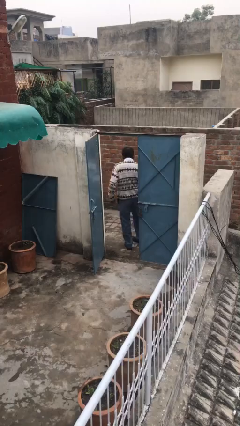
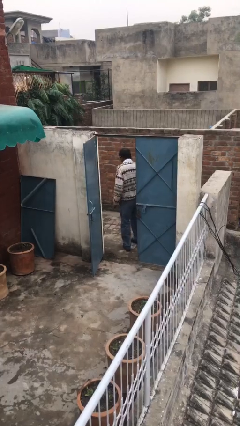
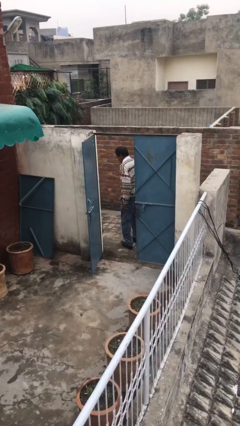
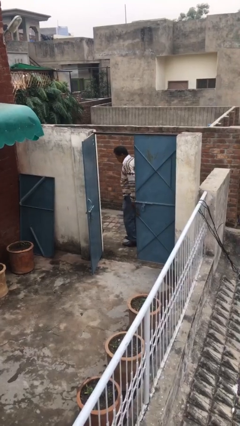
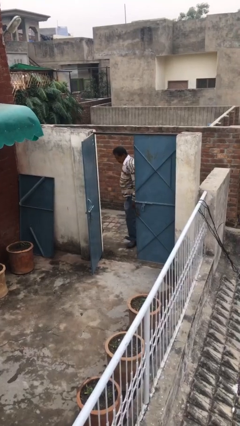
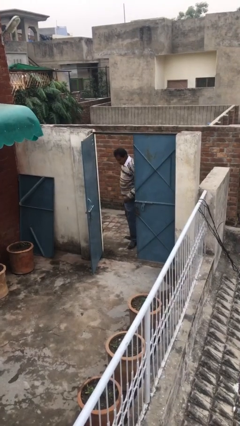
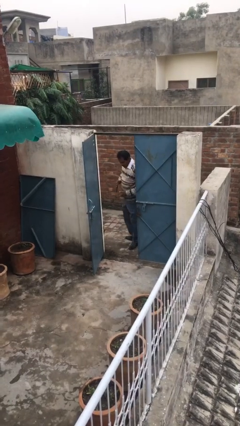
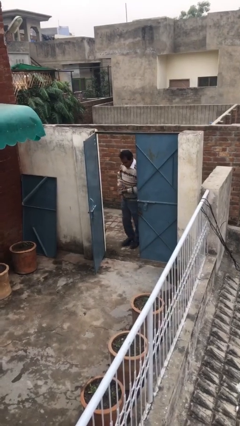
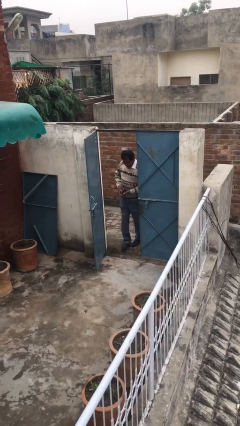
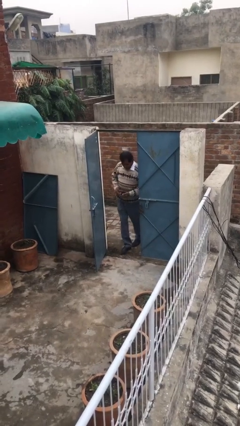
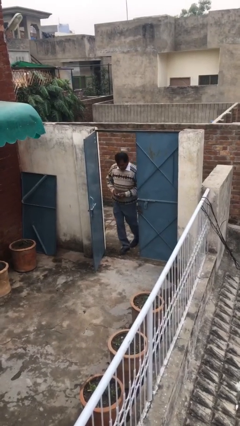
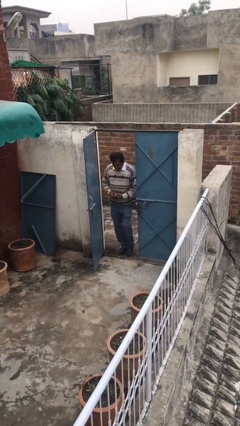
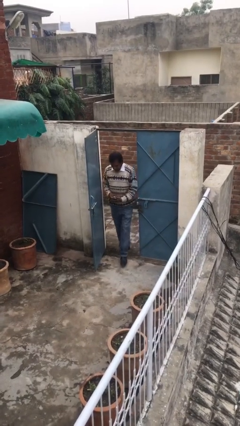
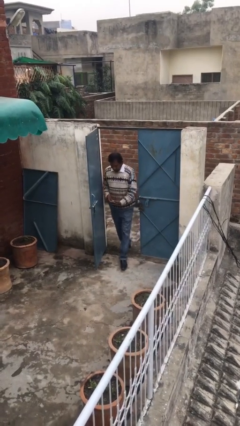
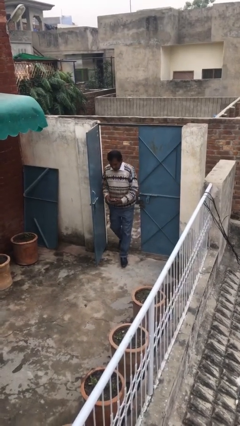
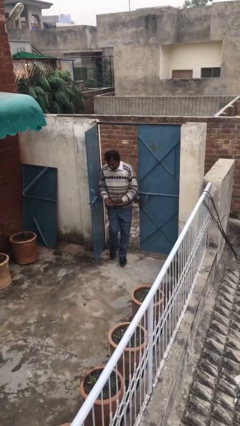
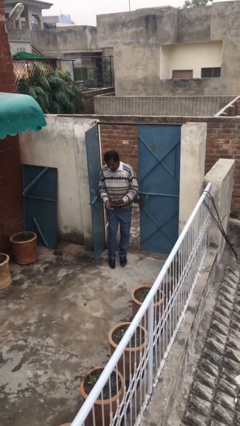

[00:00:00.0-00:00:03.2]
person enters scene through structure

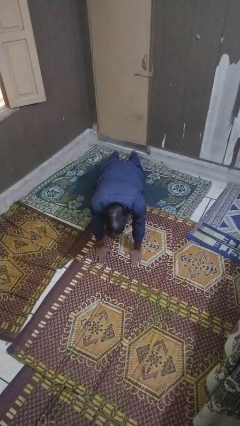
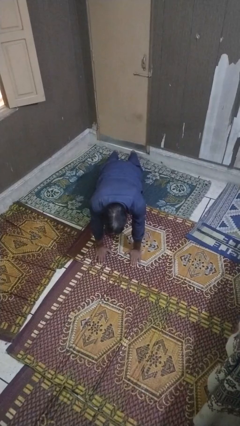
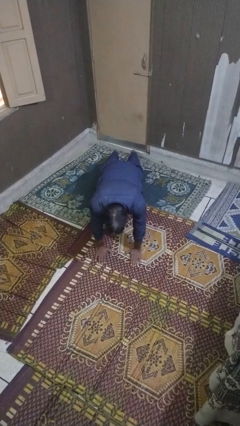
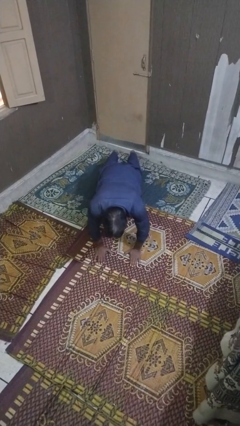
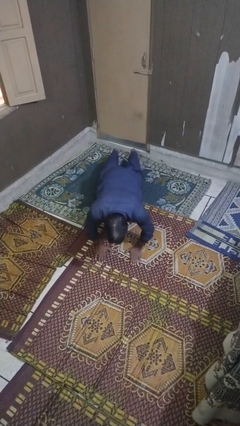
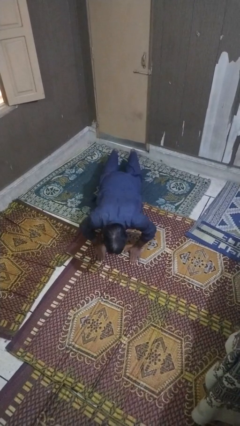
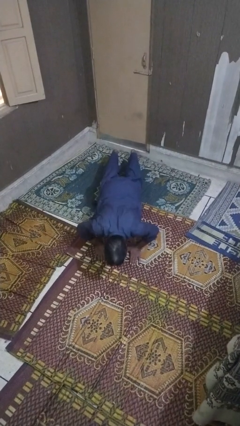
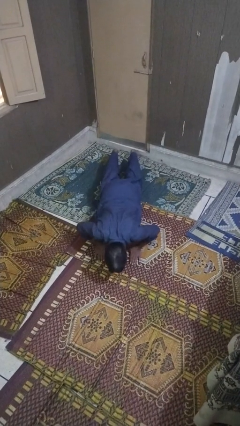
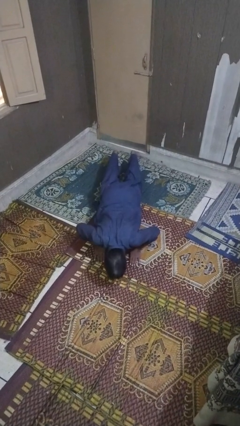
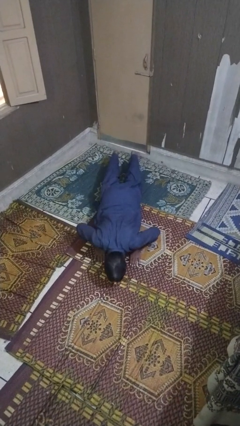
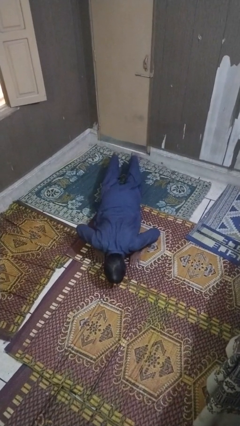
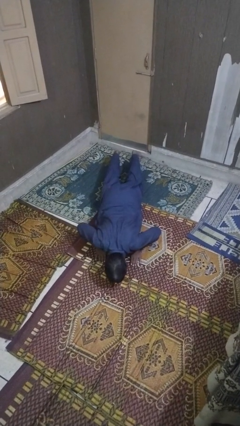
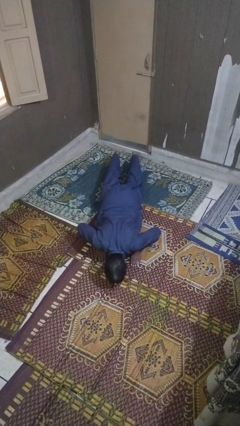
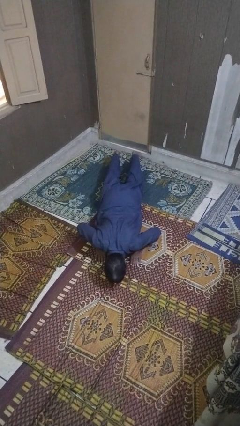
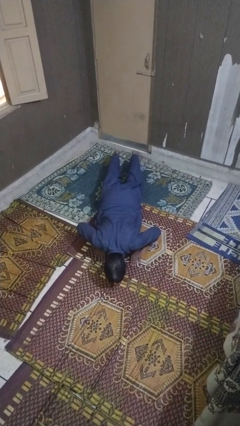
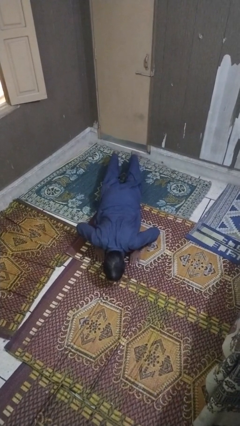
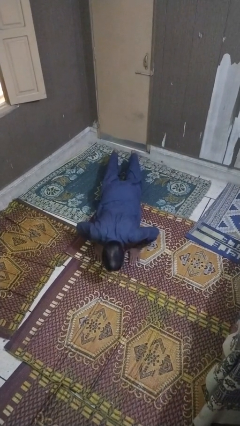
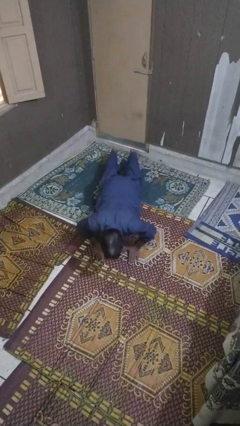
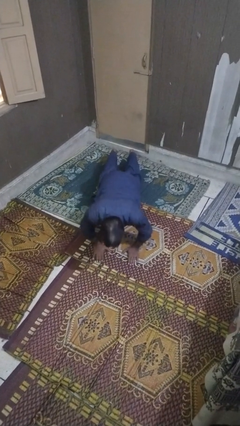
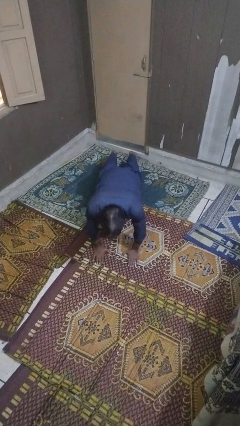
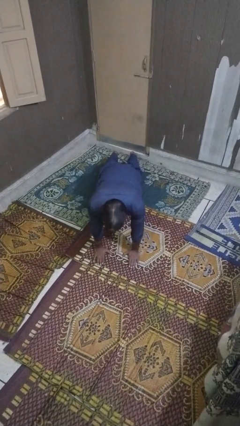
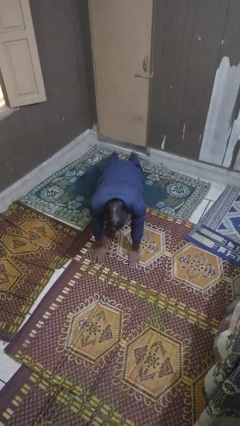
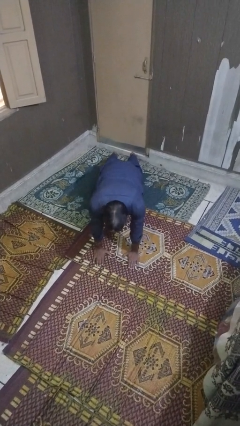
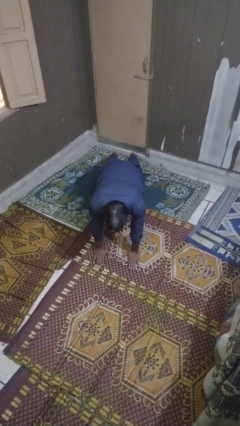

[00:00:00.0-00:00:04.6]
person exercises with pushup

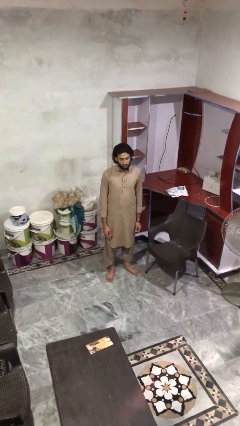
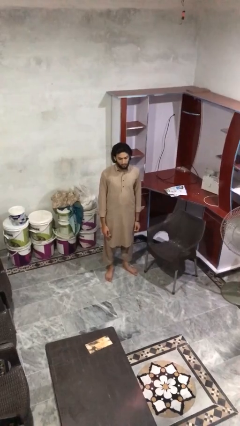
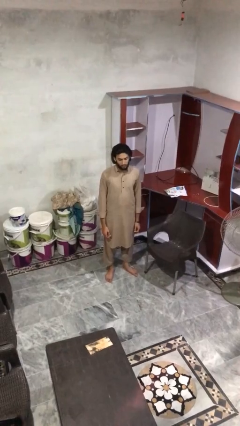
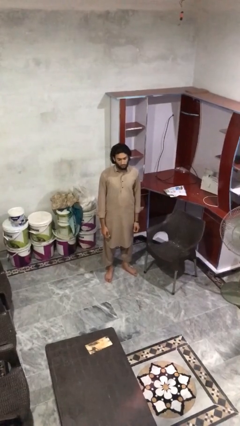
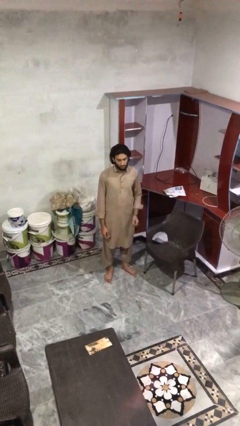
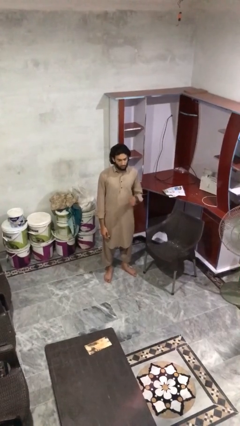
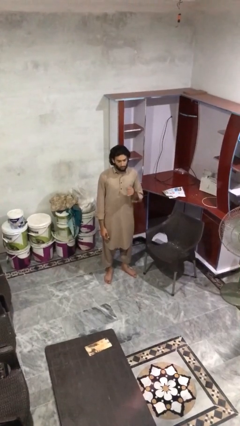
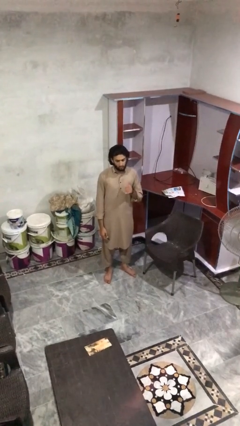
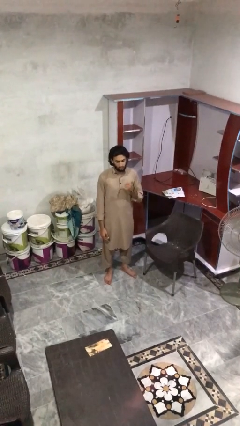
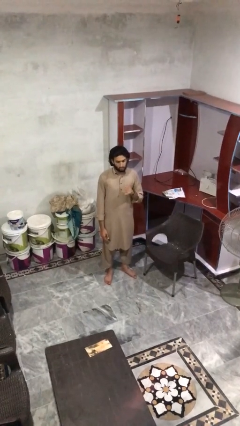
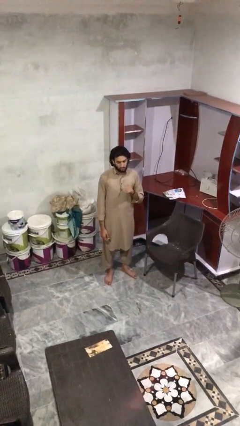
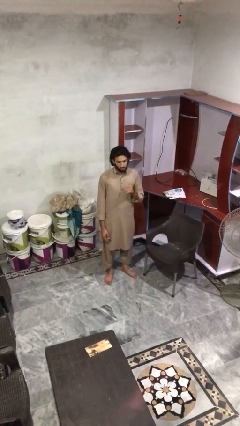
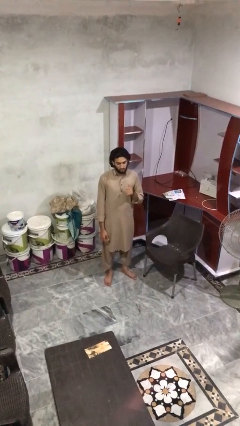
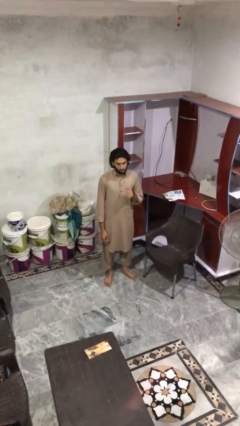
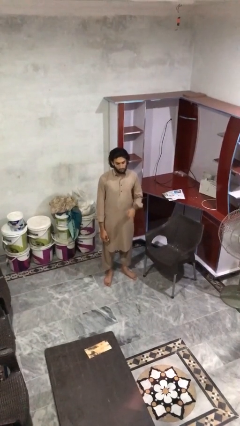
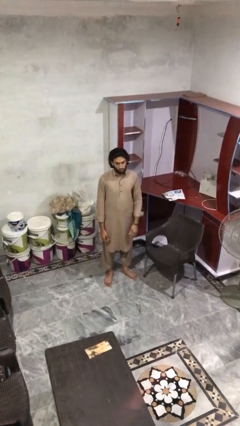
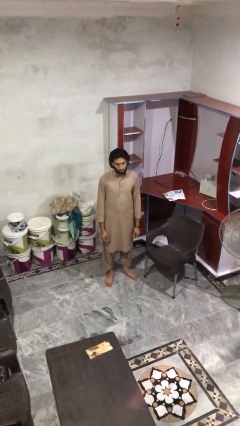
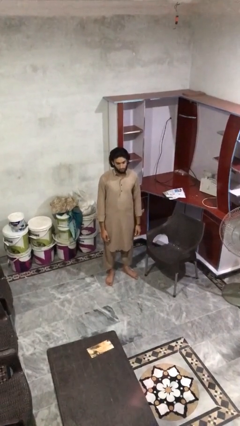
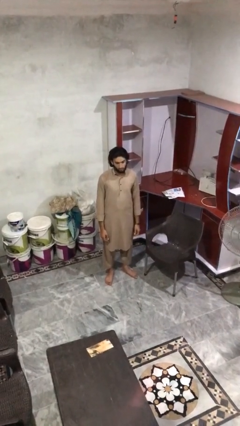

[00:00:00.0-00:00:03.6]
person gestures hang loose

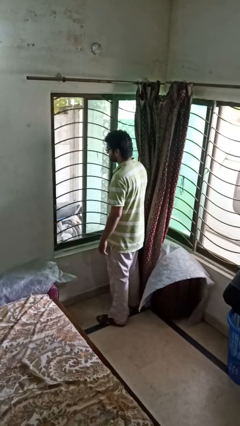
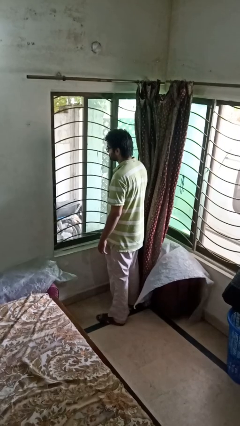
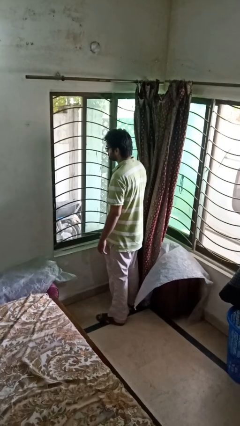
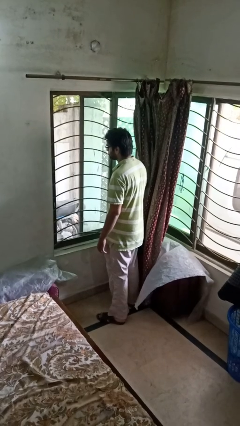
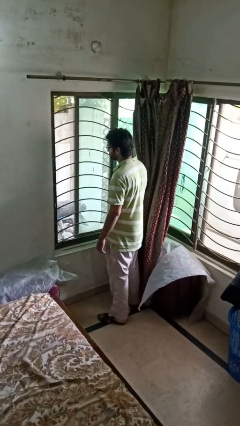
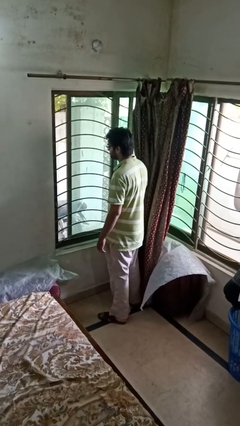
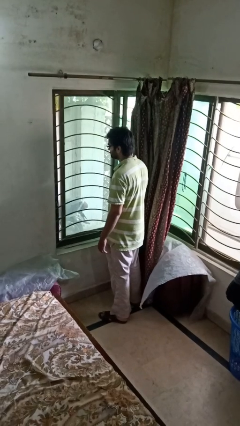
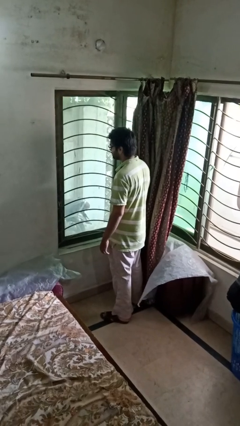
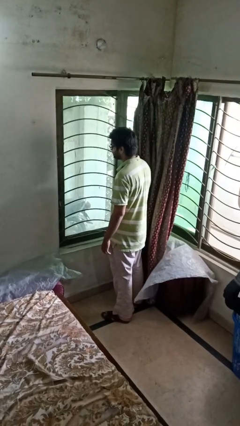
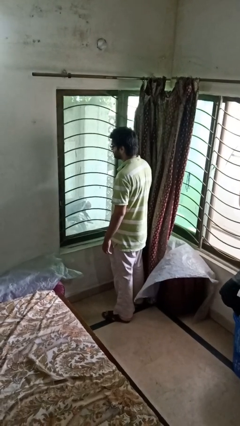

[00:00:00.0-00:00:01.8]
person closes home window

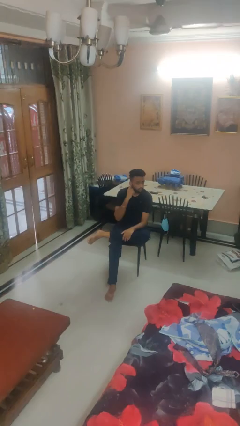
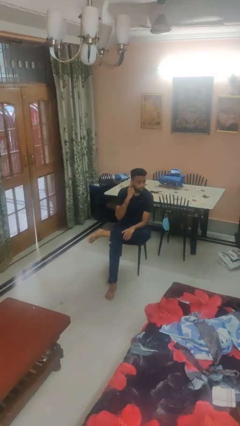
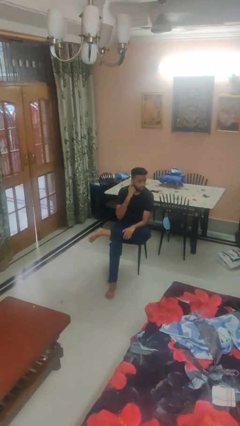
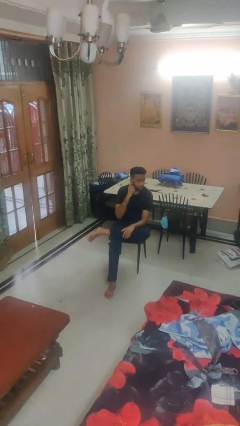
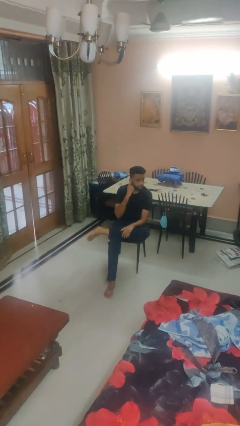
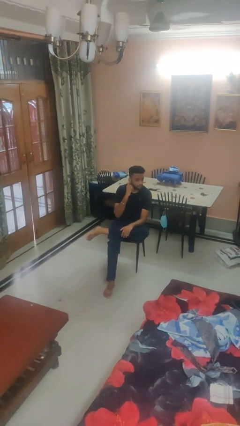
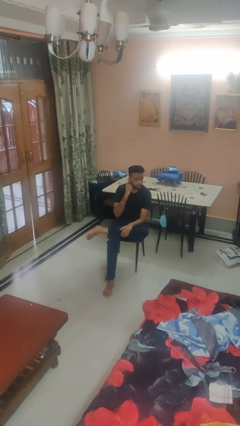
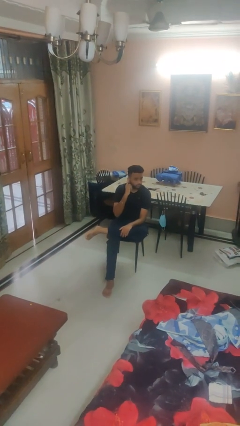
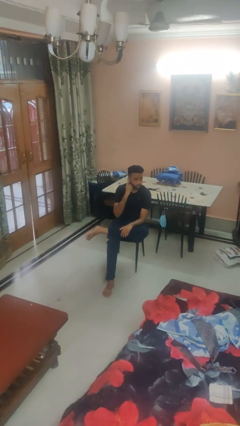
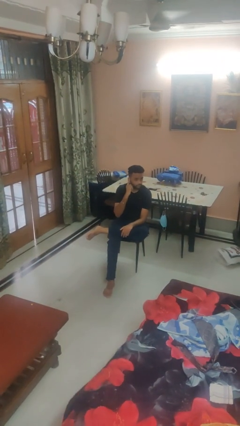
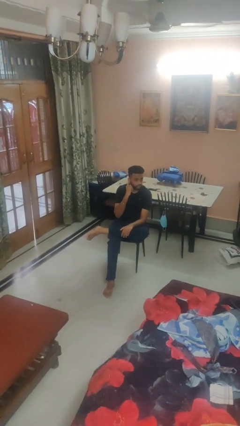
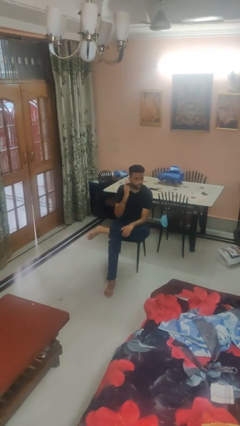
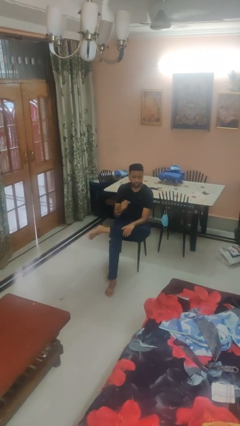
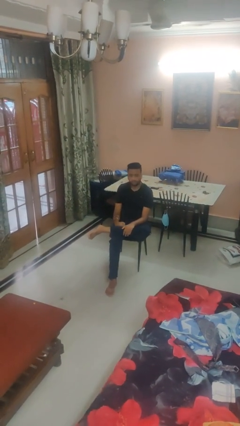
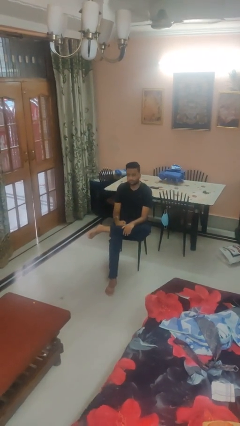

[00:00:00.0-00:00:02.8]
person gestures listen closely

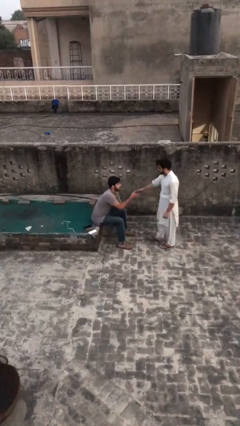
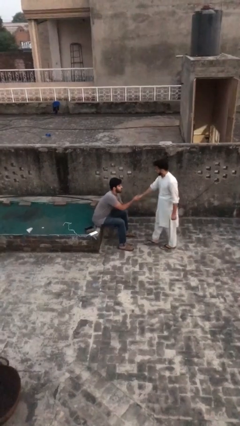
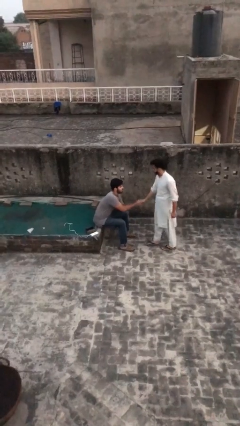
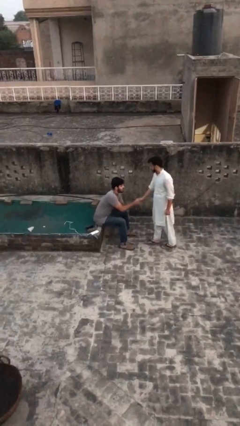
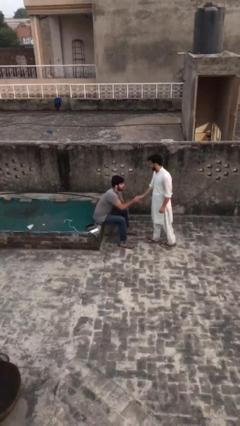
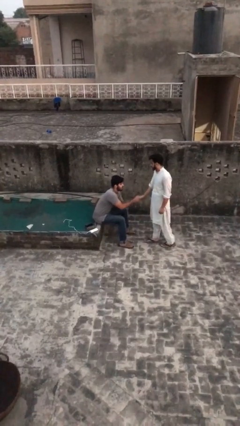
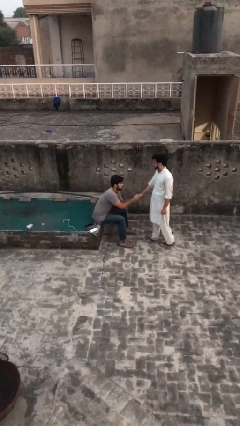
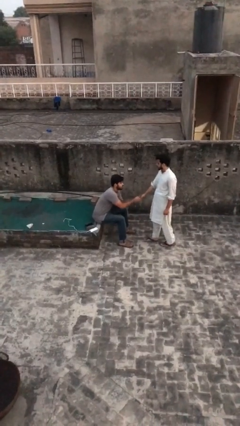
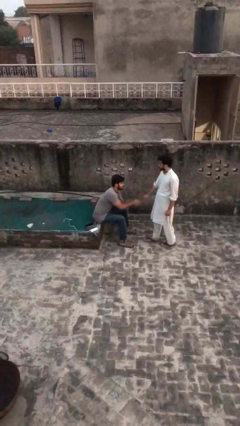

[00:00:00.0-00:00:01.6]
person shakes hand
